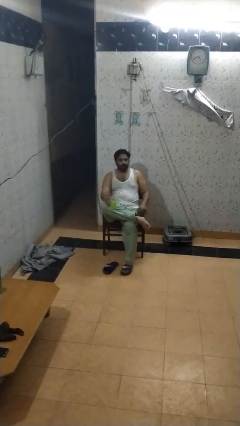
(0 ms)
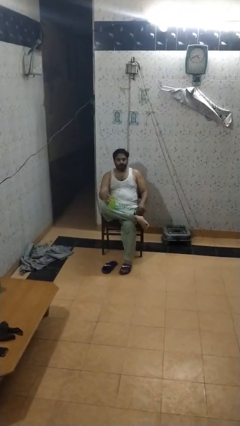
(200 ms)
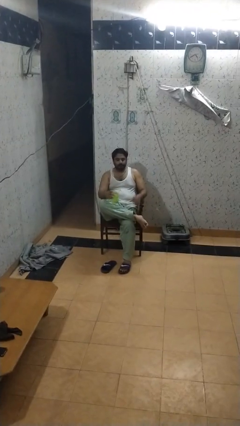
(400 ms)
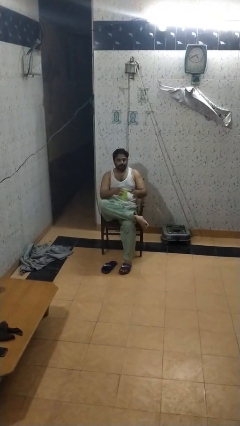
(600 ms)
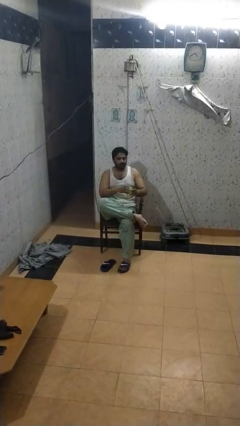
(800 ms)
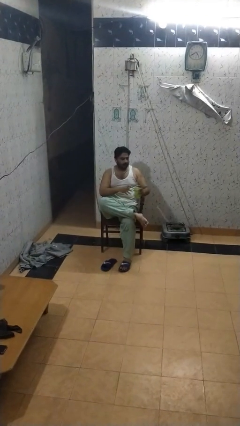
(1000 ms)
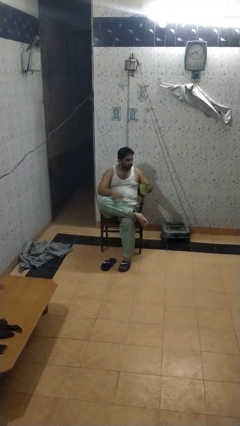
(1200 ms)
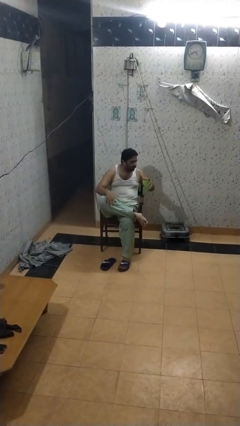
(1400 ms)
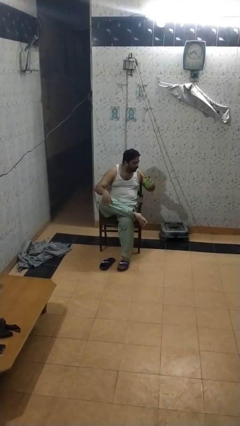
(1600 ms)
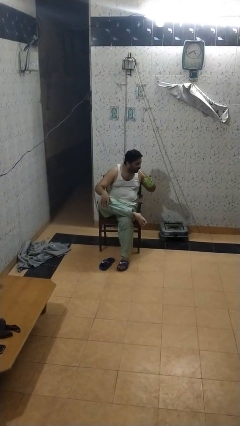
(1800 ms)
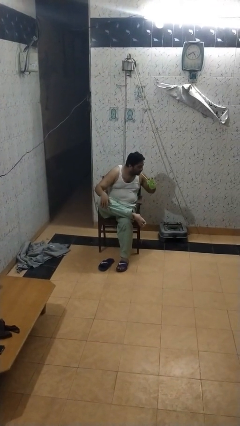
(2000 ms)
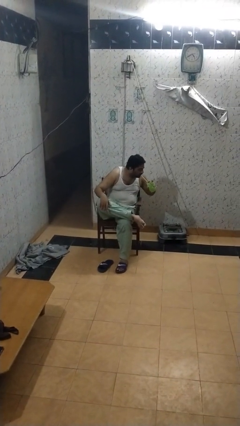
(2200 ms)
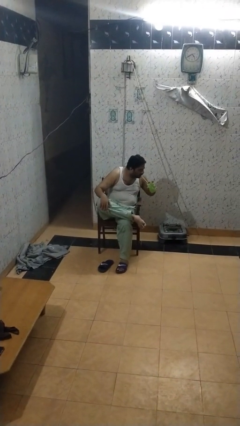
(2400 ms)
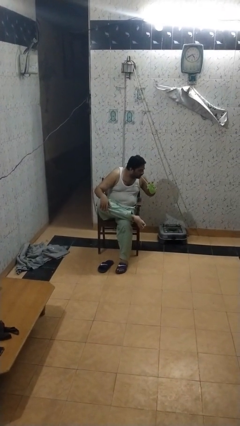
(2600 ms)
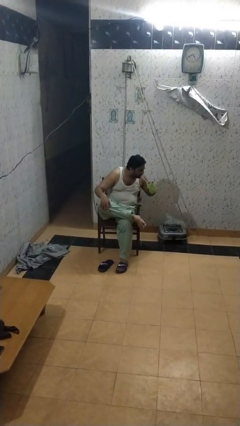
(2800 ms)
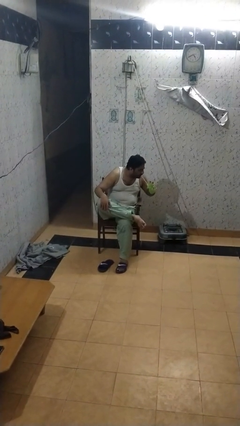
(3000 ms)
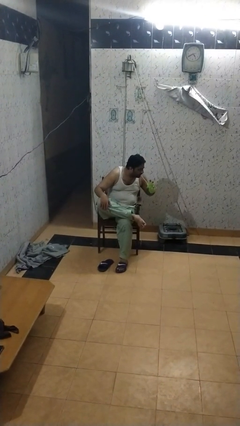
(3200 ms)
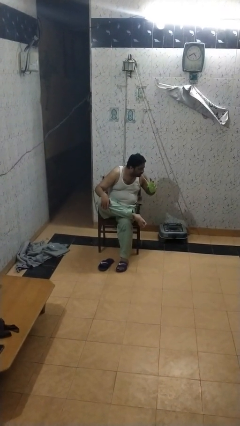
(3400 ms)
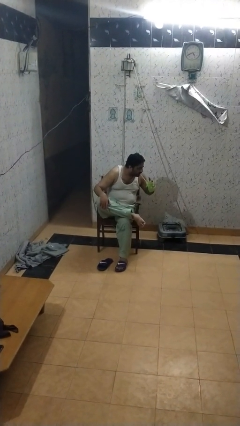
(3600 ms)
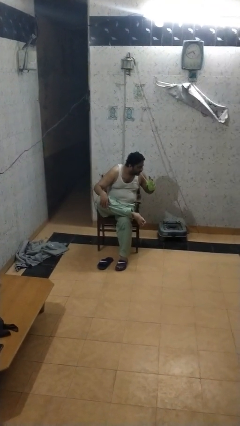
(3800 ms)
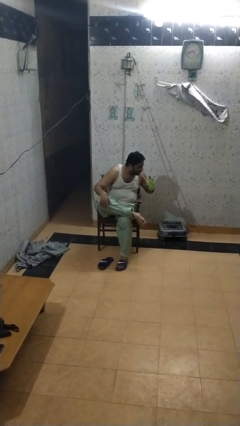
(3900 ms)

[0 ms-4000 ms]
person drinks from straw

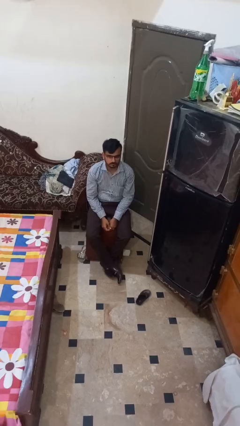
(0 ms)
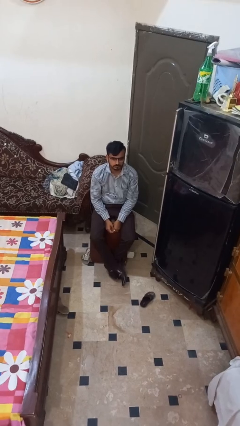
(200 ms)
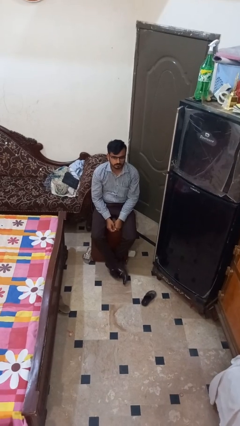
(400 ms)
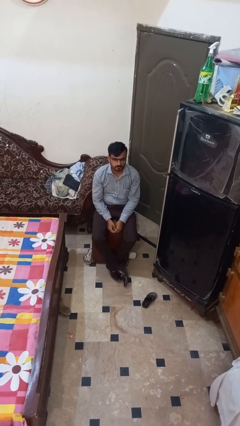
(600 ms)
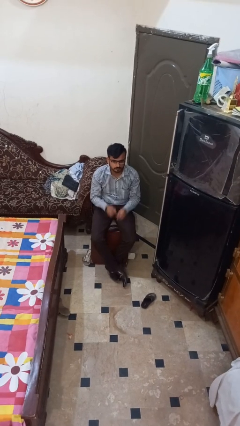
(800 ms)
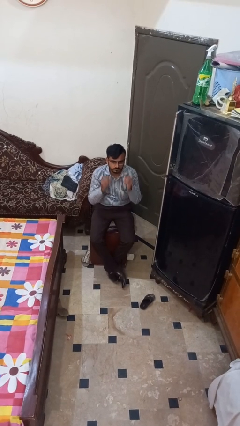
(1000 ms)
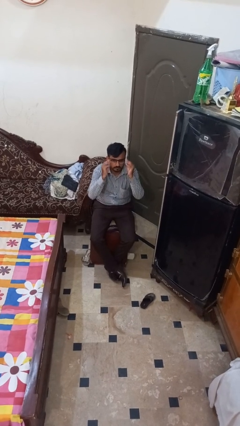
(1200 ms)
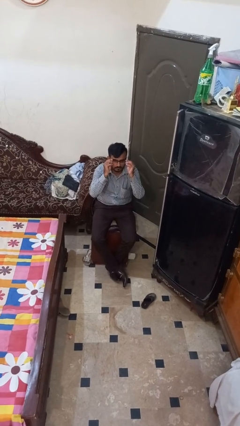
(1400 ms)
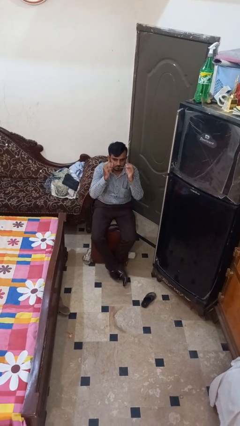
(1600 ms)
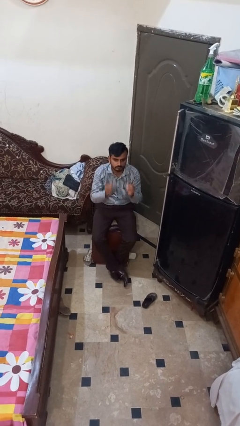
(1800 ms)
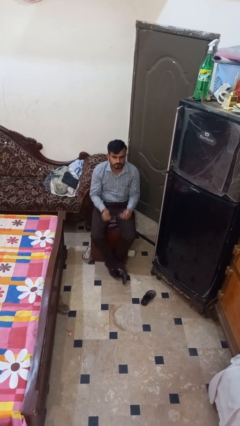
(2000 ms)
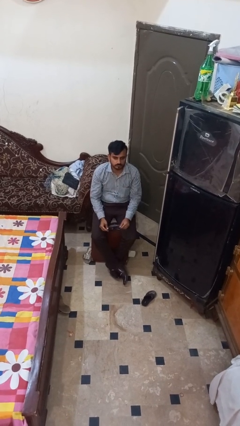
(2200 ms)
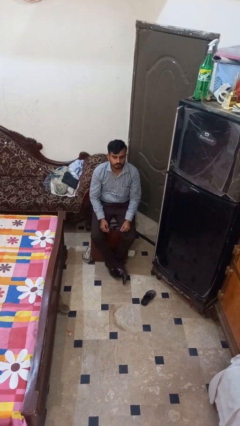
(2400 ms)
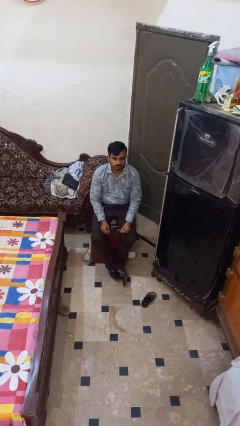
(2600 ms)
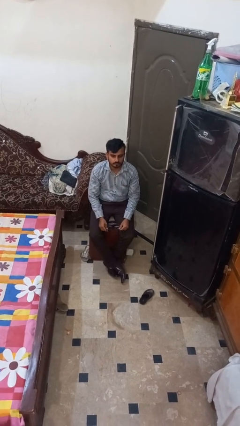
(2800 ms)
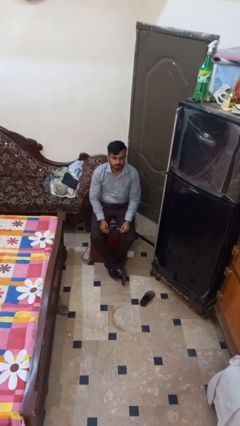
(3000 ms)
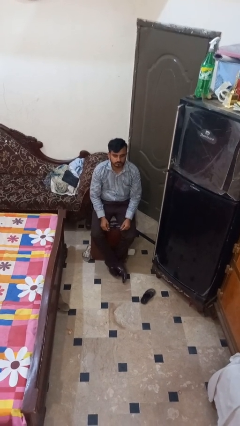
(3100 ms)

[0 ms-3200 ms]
person takes off glasses

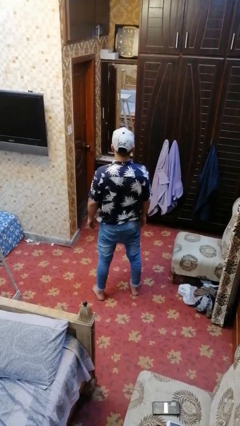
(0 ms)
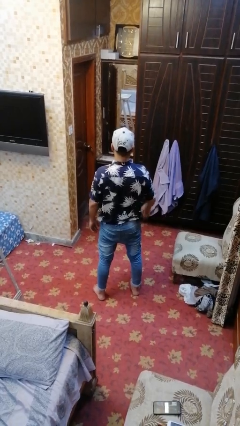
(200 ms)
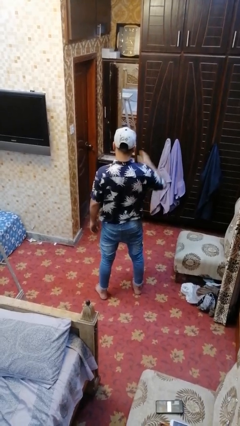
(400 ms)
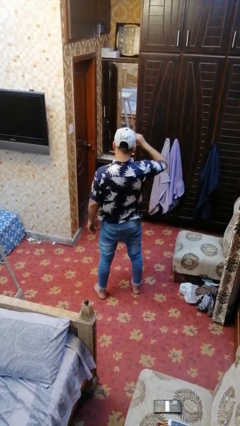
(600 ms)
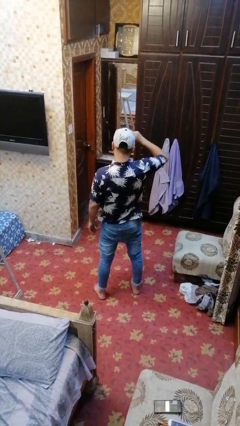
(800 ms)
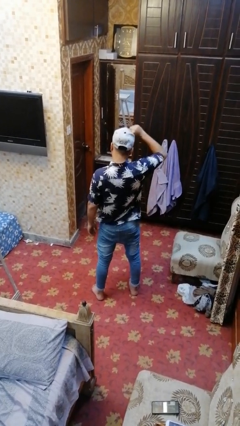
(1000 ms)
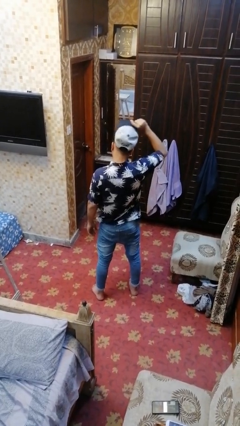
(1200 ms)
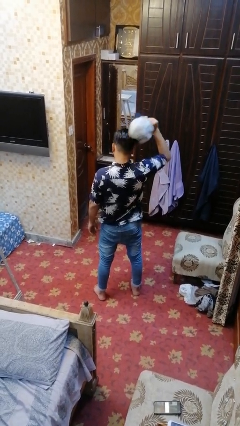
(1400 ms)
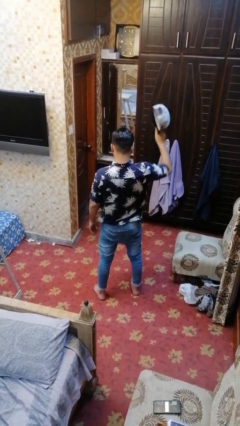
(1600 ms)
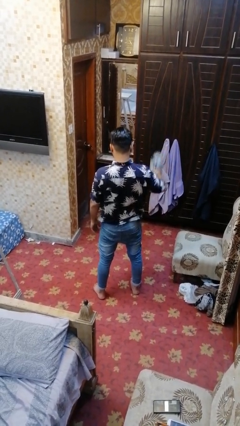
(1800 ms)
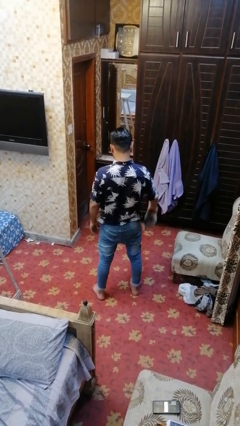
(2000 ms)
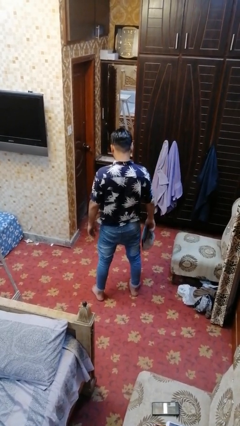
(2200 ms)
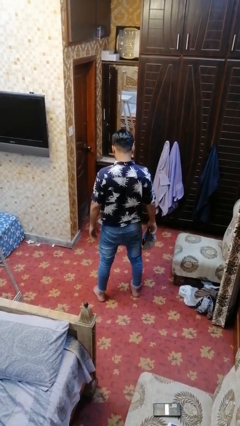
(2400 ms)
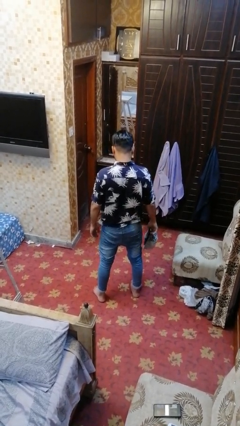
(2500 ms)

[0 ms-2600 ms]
person takes off hat

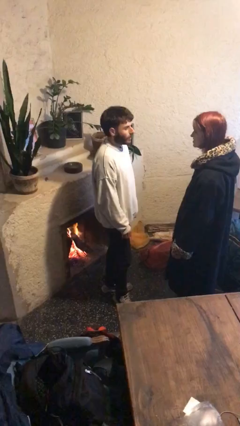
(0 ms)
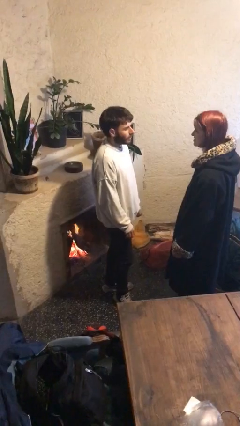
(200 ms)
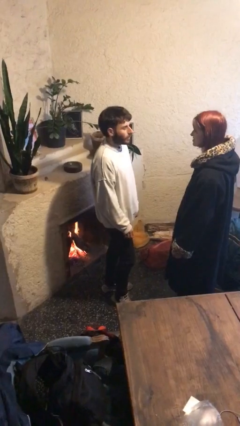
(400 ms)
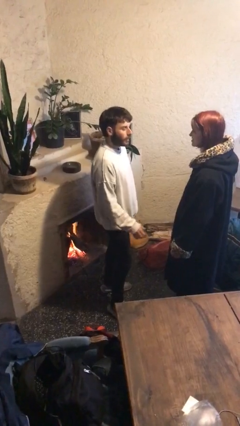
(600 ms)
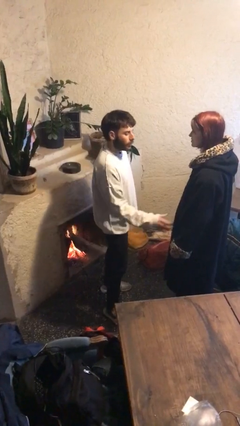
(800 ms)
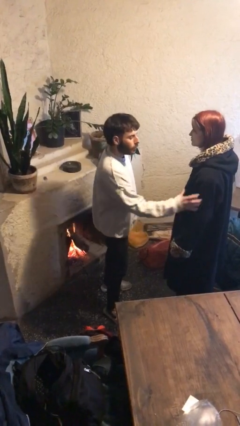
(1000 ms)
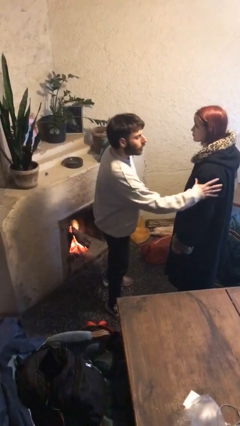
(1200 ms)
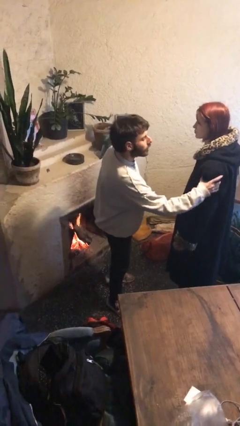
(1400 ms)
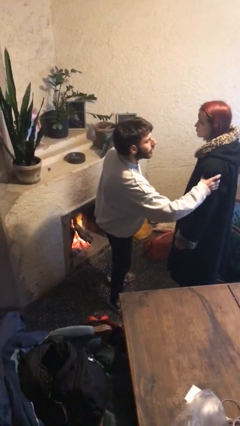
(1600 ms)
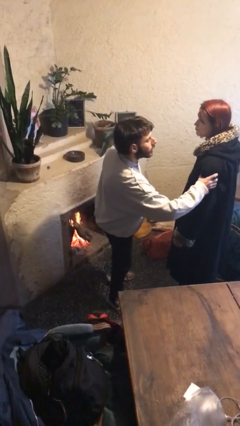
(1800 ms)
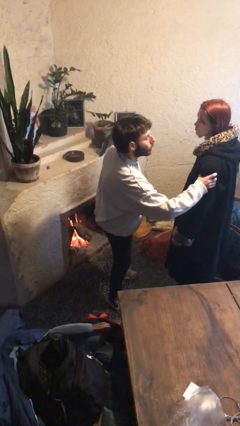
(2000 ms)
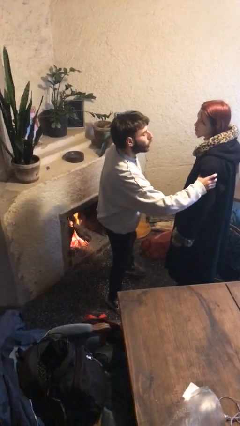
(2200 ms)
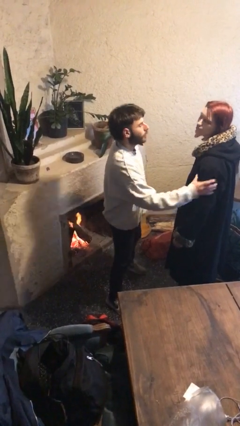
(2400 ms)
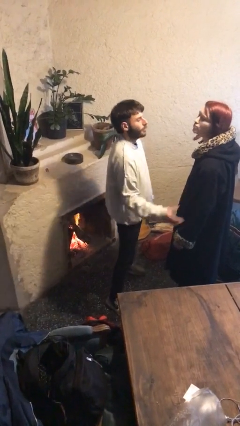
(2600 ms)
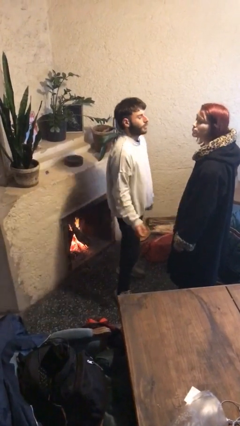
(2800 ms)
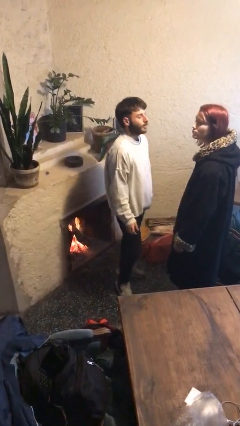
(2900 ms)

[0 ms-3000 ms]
person grabs person by bicep

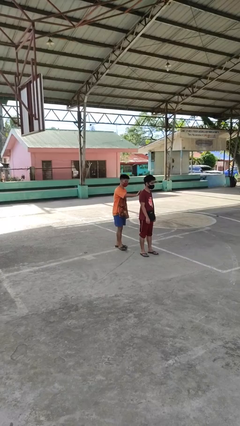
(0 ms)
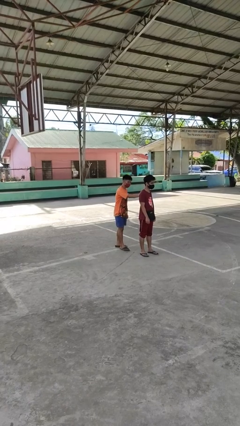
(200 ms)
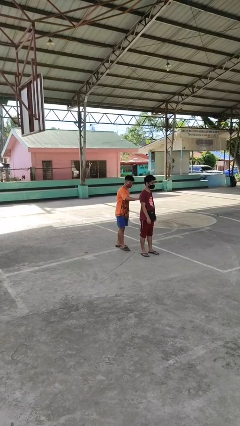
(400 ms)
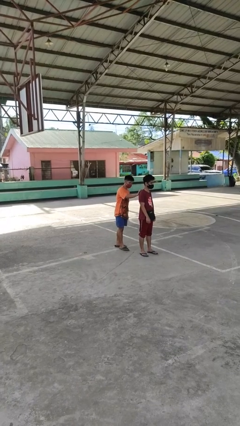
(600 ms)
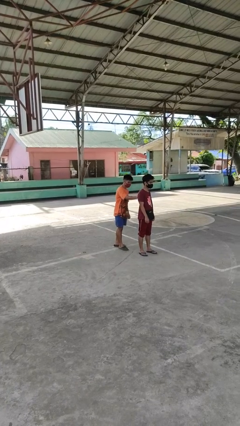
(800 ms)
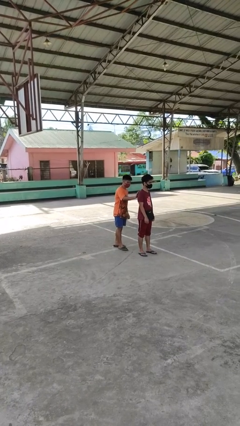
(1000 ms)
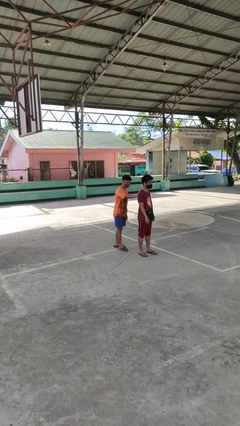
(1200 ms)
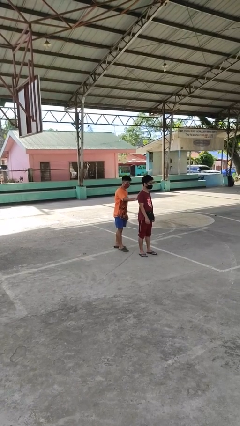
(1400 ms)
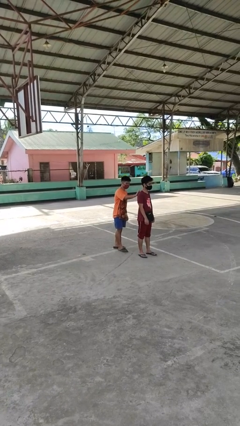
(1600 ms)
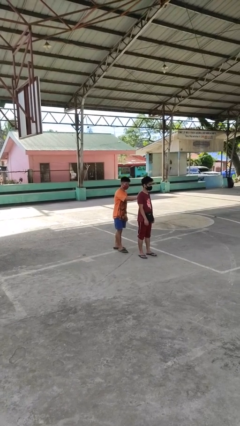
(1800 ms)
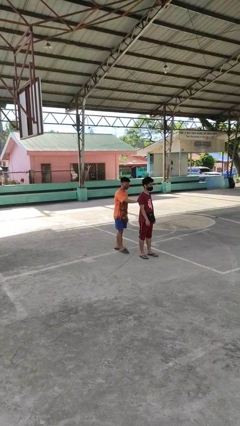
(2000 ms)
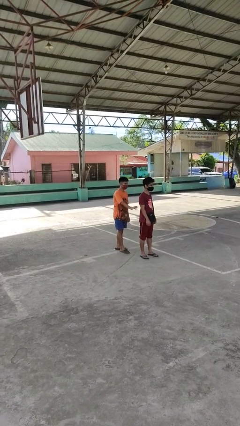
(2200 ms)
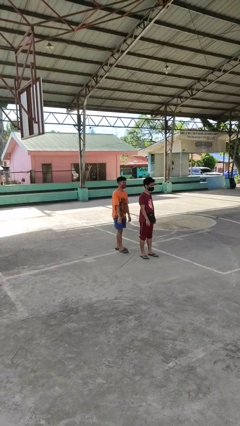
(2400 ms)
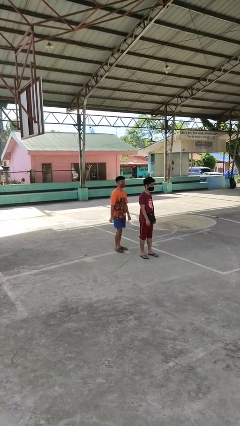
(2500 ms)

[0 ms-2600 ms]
person touches back of person

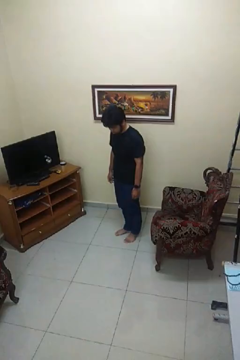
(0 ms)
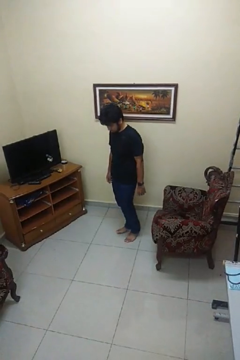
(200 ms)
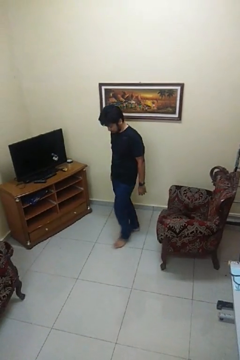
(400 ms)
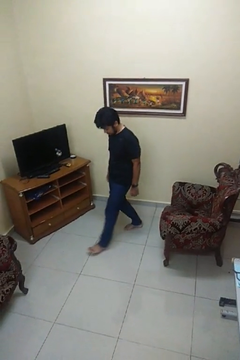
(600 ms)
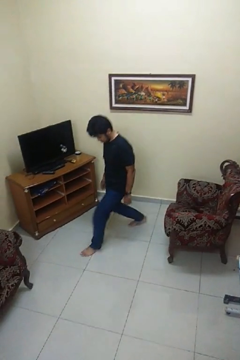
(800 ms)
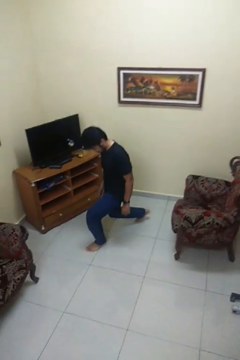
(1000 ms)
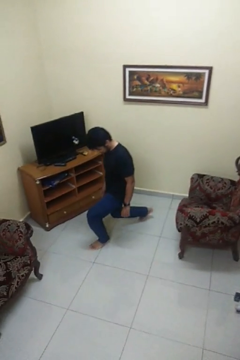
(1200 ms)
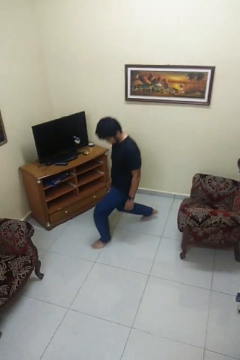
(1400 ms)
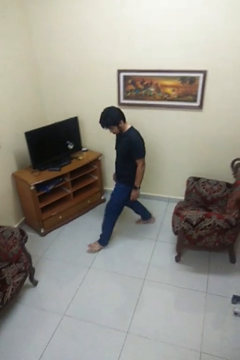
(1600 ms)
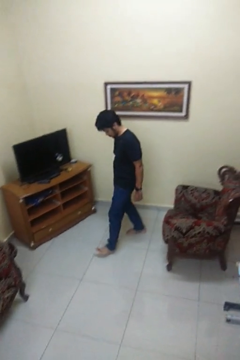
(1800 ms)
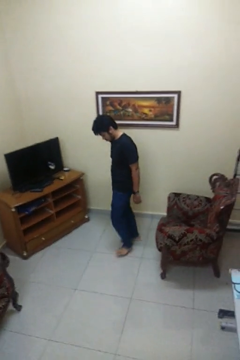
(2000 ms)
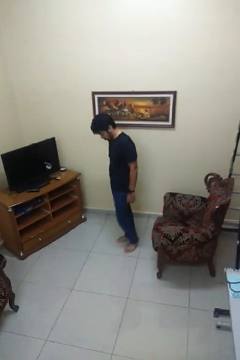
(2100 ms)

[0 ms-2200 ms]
person exercises with lunges
